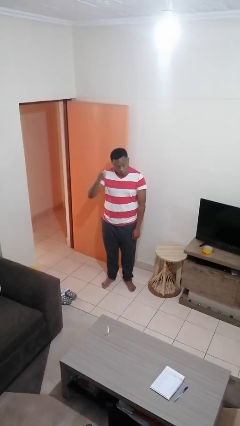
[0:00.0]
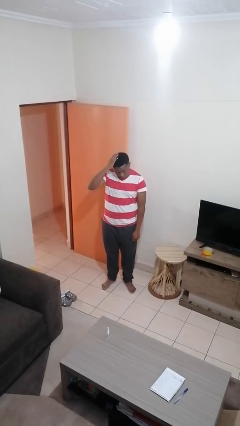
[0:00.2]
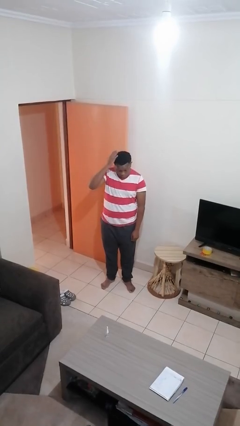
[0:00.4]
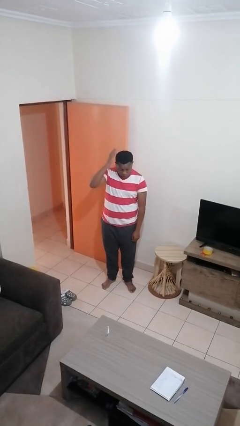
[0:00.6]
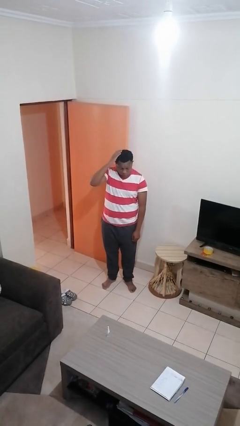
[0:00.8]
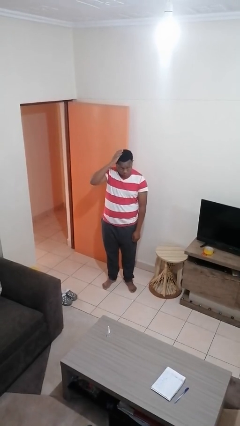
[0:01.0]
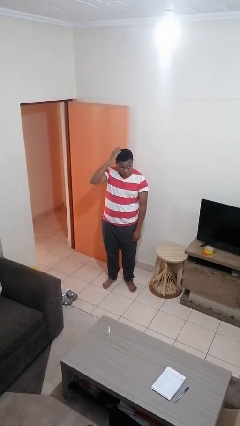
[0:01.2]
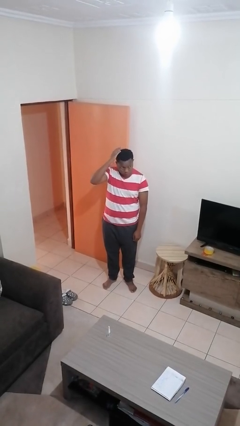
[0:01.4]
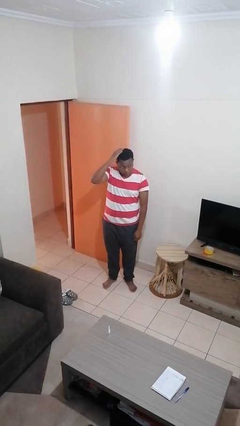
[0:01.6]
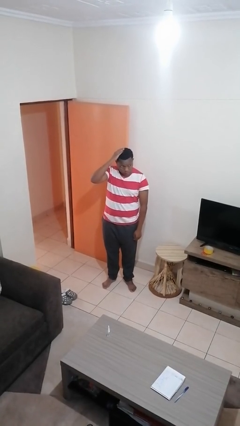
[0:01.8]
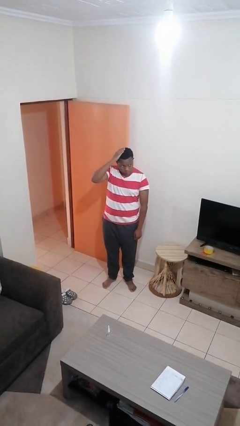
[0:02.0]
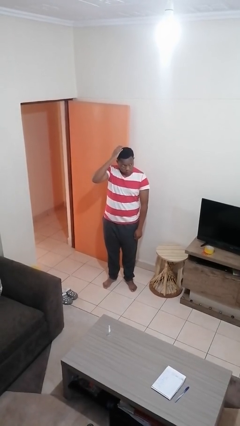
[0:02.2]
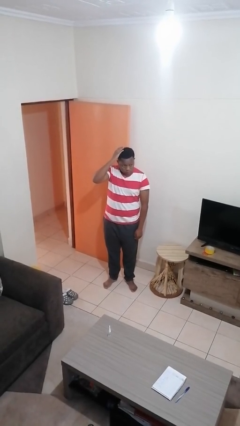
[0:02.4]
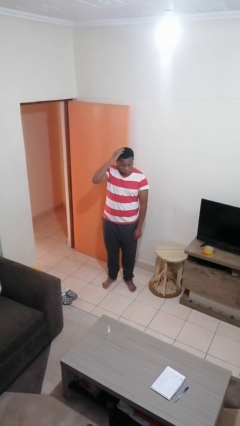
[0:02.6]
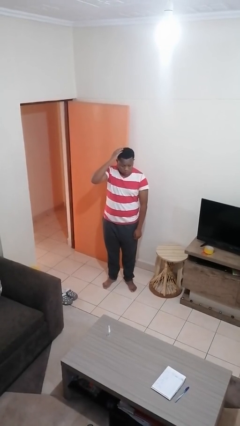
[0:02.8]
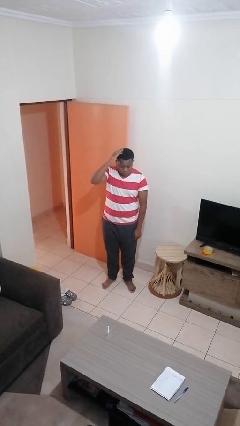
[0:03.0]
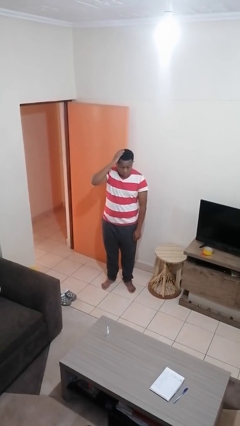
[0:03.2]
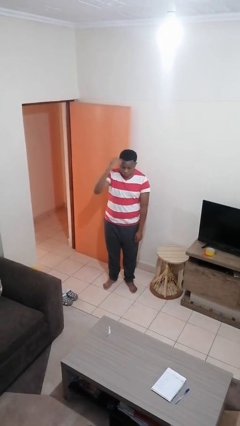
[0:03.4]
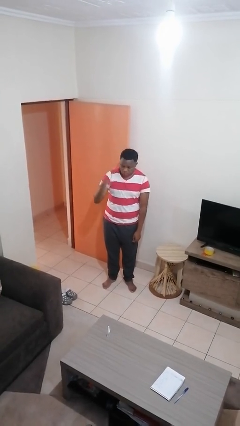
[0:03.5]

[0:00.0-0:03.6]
person pats head

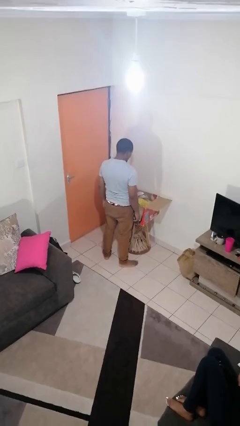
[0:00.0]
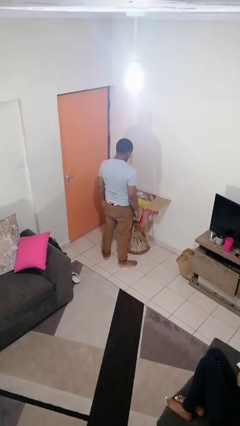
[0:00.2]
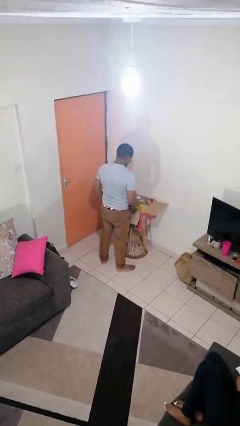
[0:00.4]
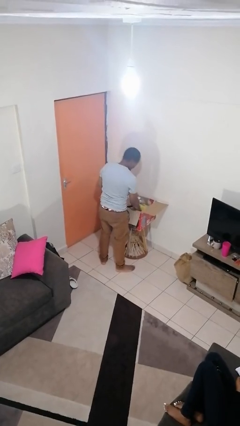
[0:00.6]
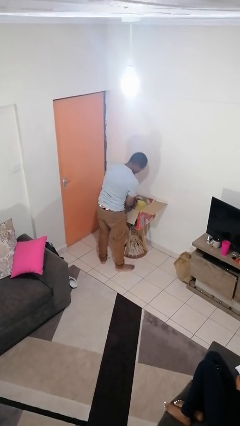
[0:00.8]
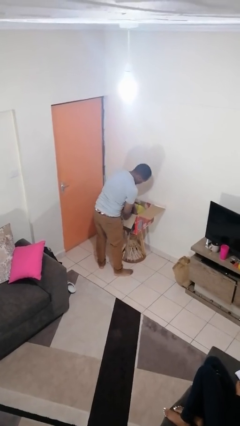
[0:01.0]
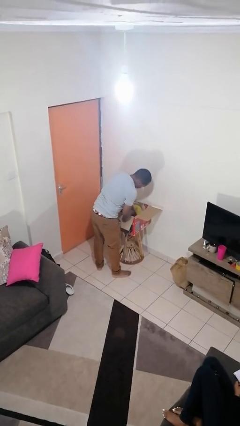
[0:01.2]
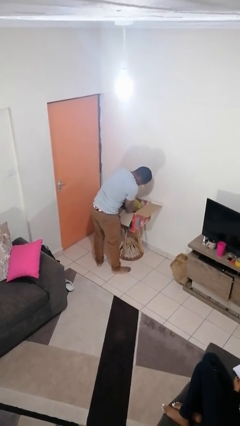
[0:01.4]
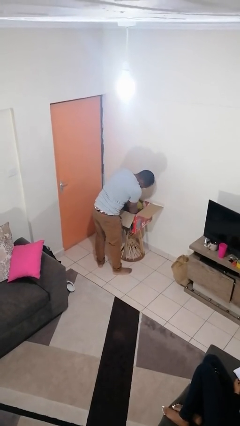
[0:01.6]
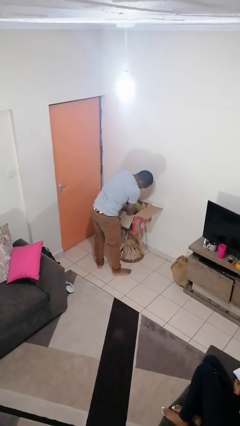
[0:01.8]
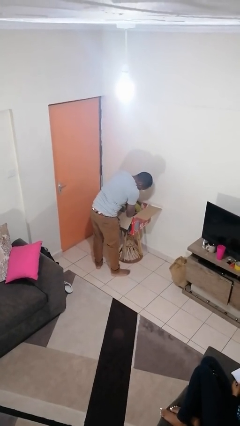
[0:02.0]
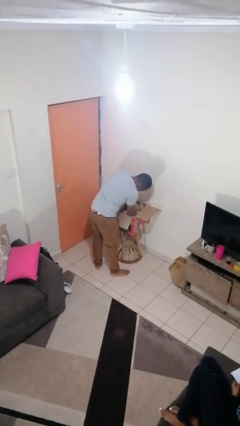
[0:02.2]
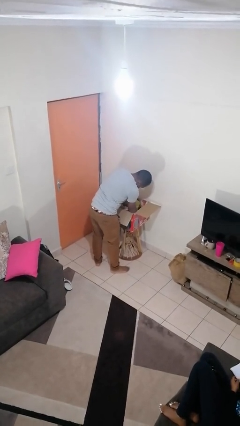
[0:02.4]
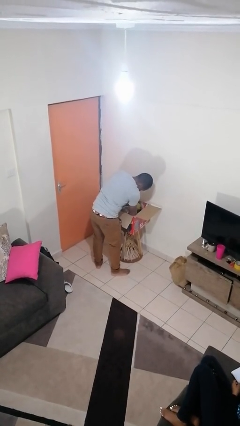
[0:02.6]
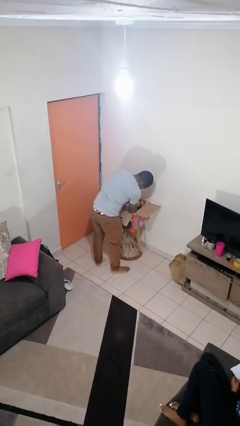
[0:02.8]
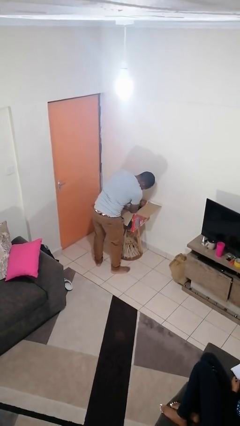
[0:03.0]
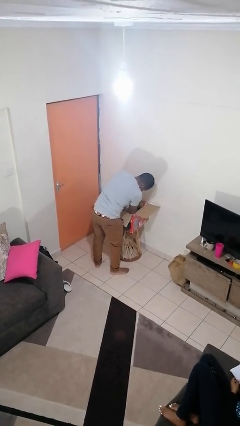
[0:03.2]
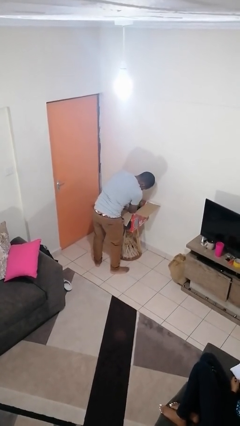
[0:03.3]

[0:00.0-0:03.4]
person searches in box

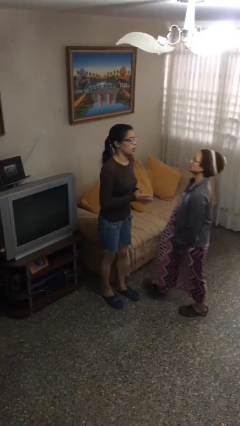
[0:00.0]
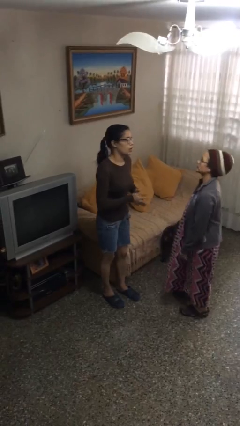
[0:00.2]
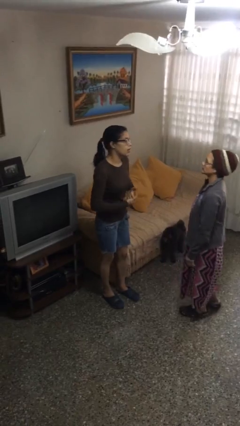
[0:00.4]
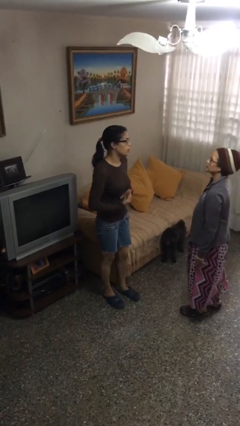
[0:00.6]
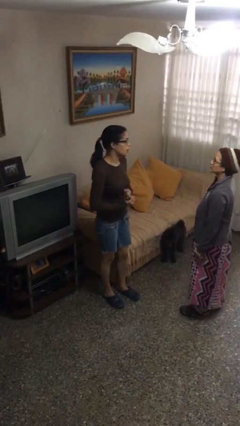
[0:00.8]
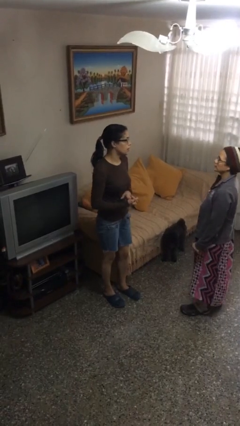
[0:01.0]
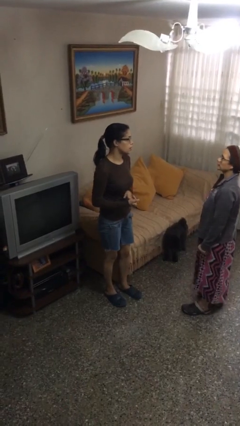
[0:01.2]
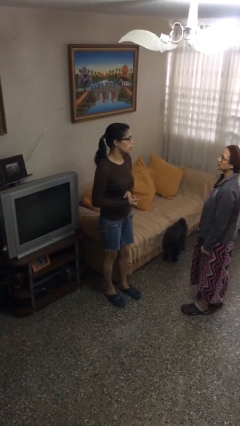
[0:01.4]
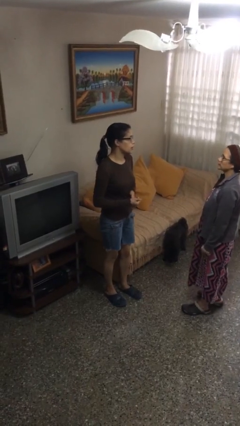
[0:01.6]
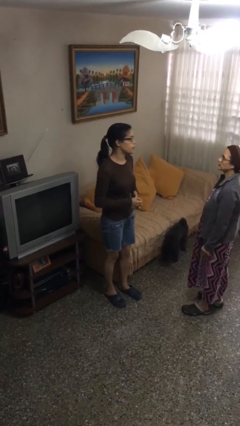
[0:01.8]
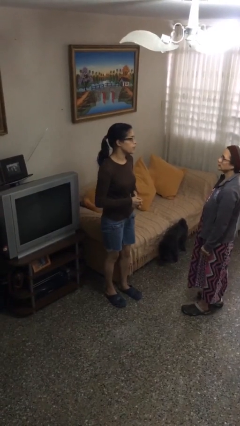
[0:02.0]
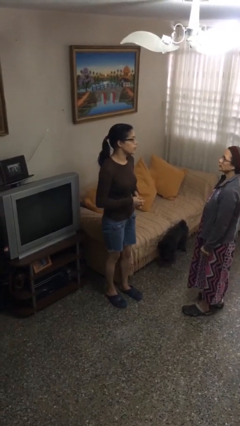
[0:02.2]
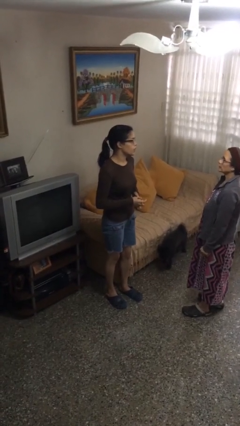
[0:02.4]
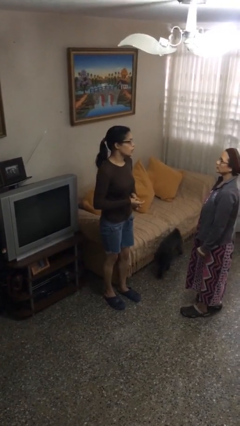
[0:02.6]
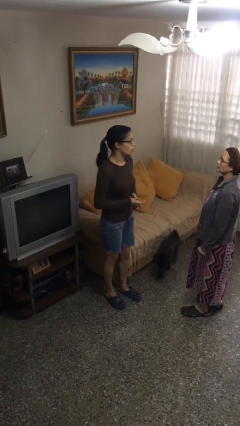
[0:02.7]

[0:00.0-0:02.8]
person talks to person

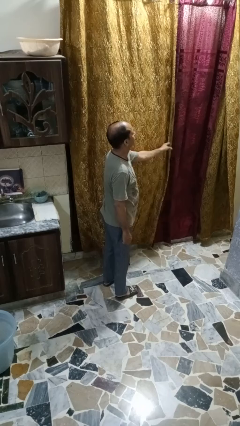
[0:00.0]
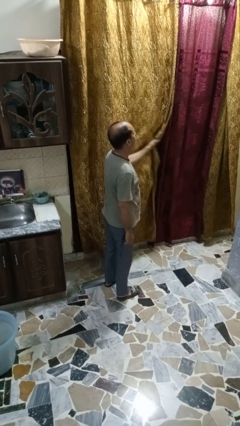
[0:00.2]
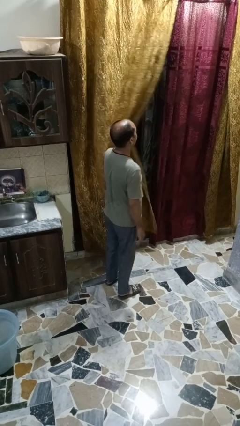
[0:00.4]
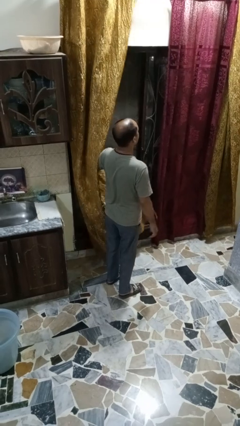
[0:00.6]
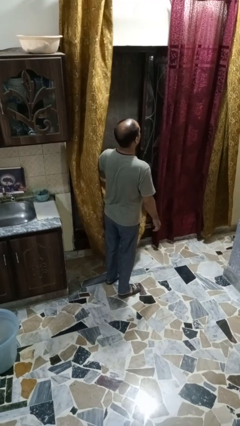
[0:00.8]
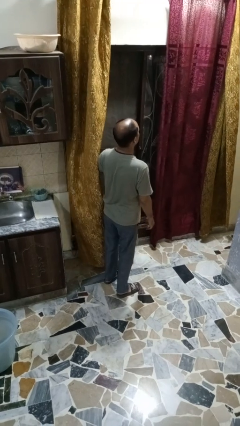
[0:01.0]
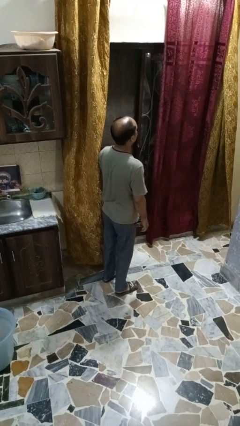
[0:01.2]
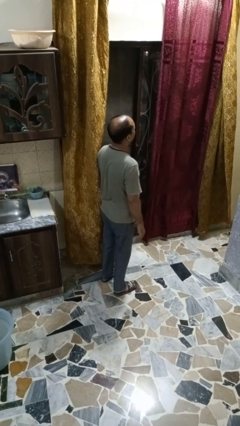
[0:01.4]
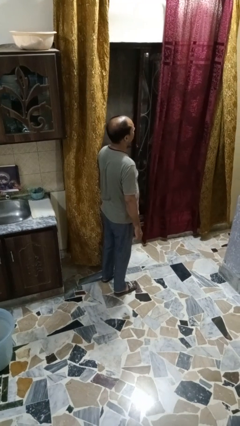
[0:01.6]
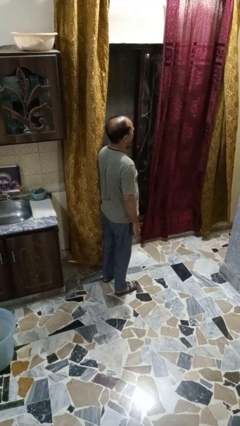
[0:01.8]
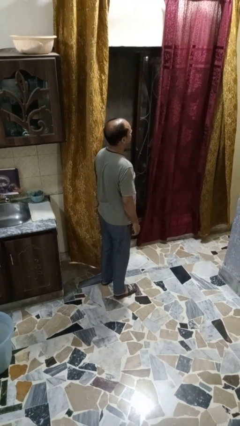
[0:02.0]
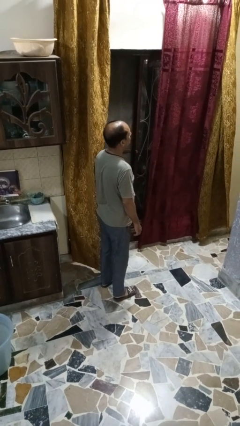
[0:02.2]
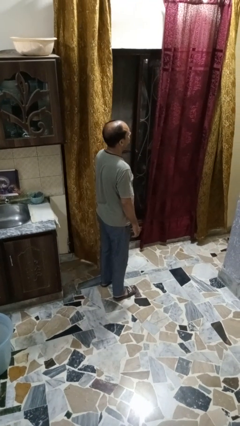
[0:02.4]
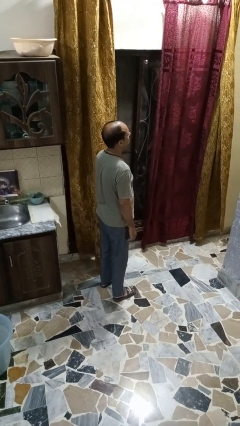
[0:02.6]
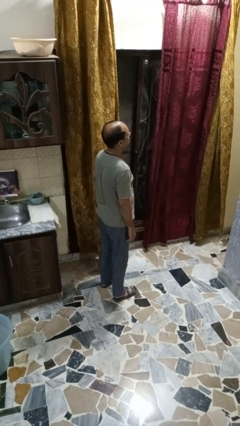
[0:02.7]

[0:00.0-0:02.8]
person opens curtains

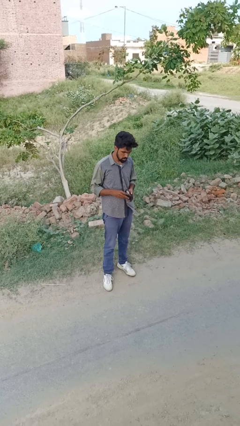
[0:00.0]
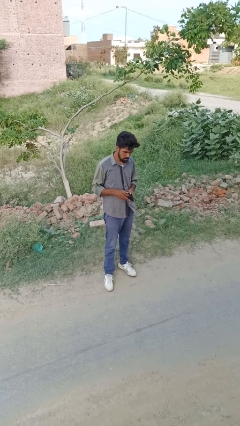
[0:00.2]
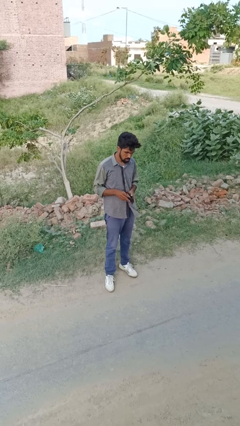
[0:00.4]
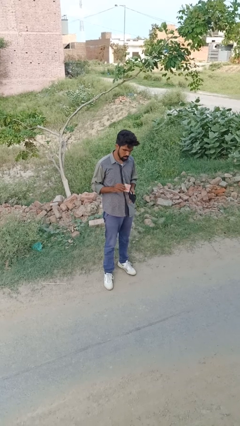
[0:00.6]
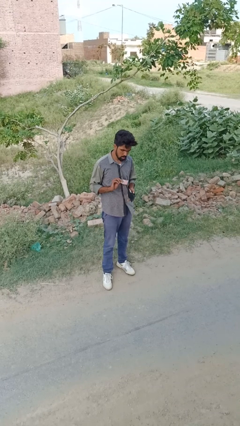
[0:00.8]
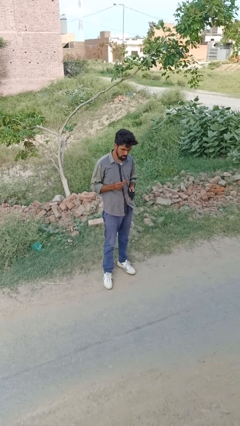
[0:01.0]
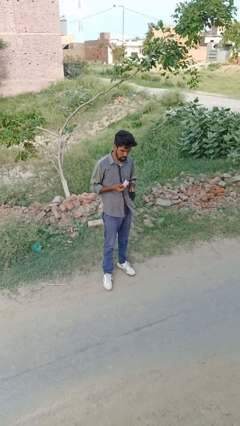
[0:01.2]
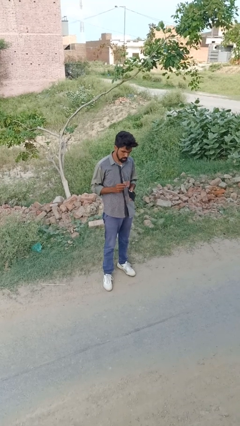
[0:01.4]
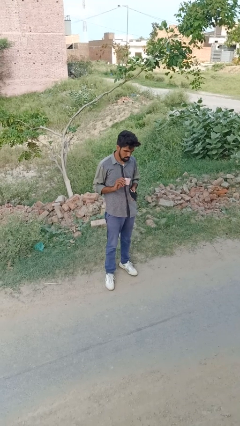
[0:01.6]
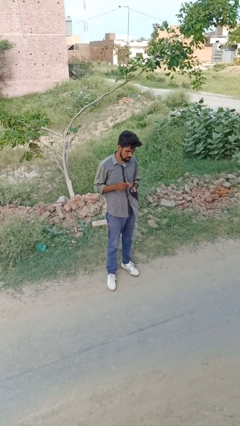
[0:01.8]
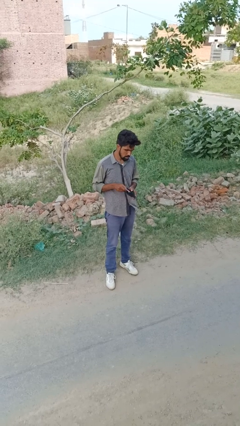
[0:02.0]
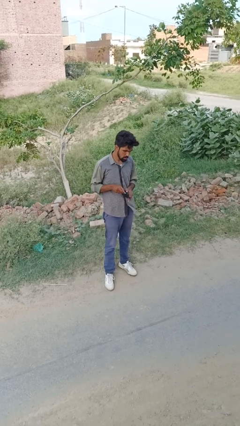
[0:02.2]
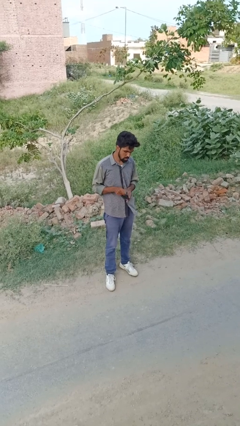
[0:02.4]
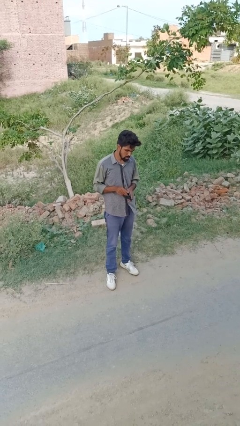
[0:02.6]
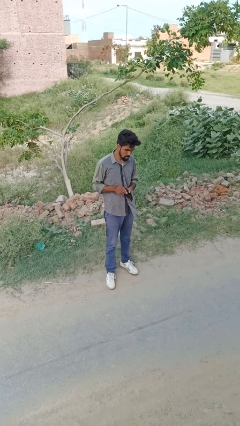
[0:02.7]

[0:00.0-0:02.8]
person takes object from purse

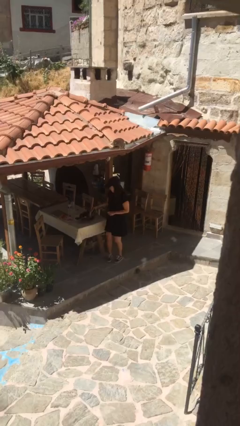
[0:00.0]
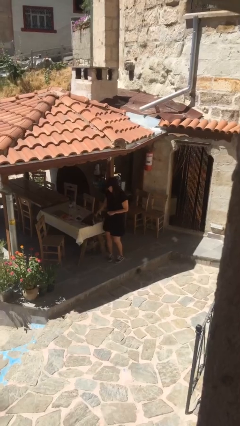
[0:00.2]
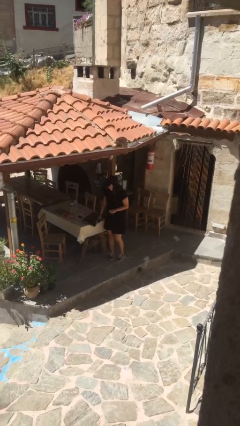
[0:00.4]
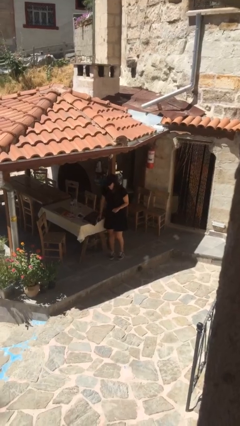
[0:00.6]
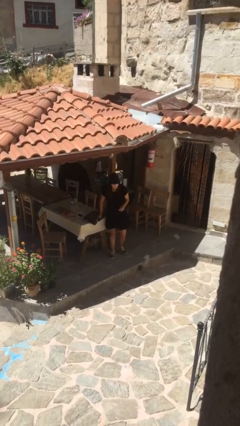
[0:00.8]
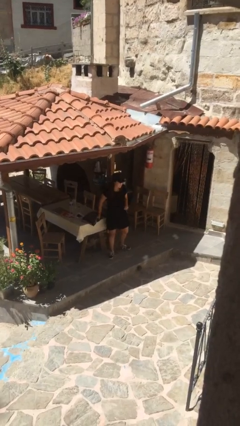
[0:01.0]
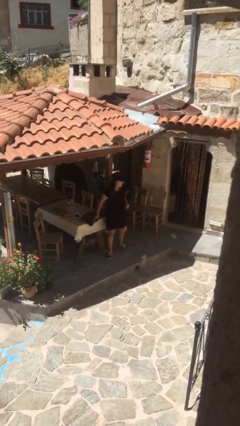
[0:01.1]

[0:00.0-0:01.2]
person puts down object on table

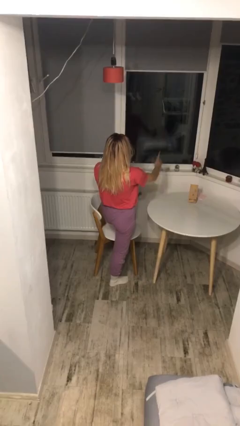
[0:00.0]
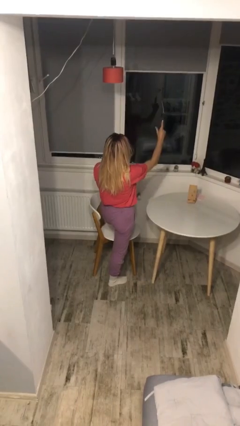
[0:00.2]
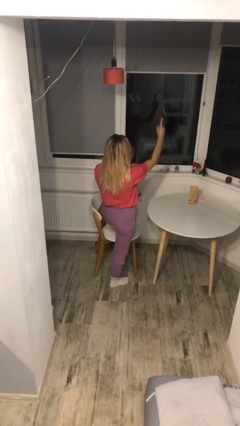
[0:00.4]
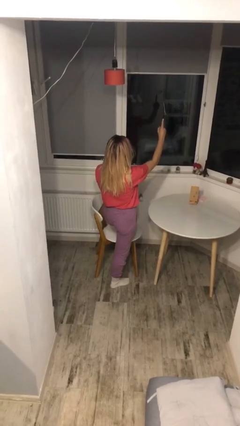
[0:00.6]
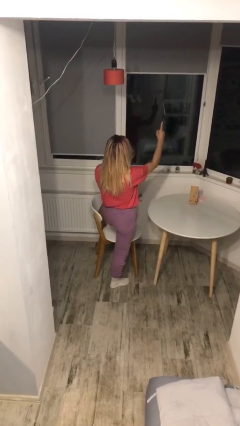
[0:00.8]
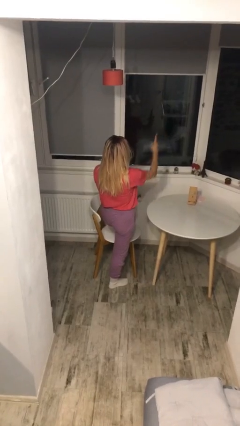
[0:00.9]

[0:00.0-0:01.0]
person gestures number one
